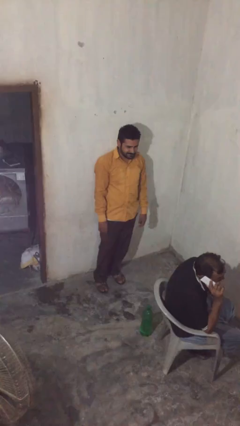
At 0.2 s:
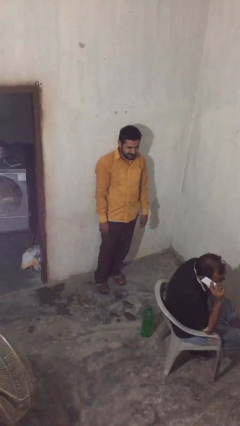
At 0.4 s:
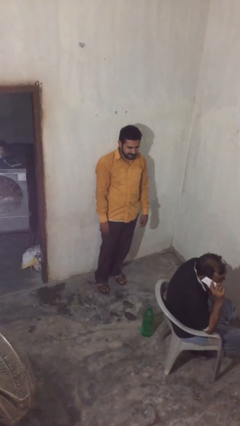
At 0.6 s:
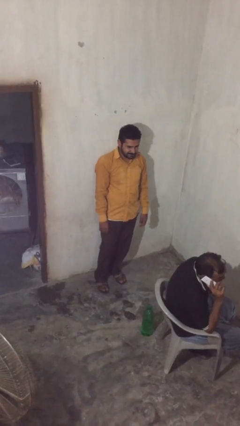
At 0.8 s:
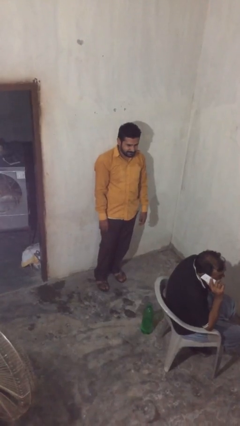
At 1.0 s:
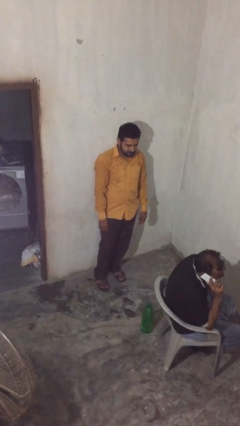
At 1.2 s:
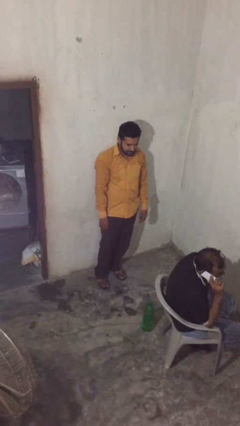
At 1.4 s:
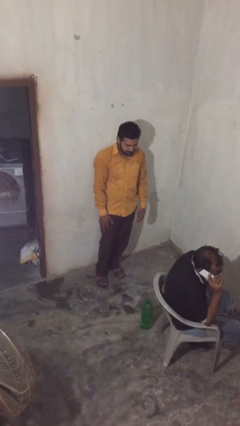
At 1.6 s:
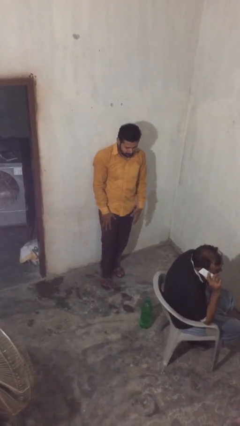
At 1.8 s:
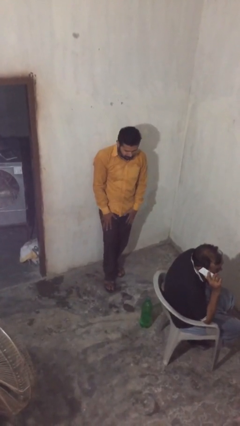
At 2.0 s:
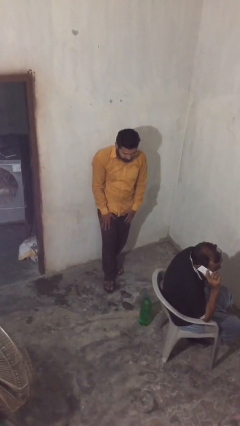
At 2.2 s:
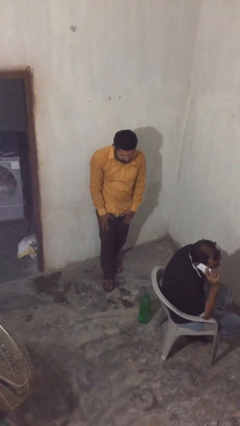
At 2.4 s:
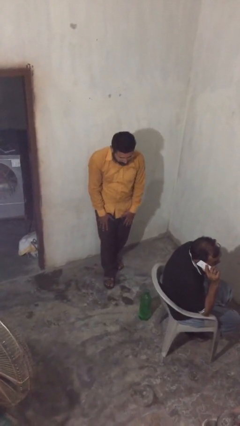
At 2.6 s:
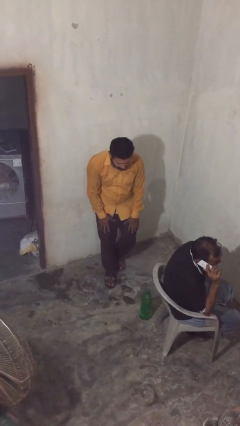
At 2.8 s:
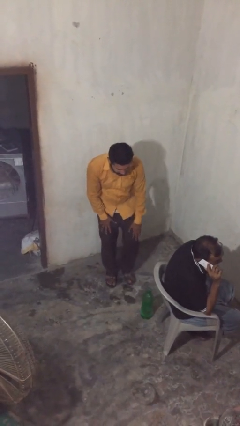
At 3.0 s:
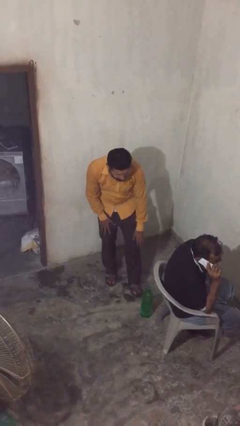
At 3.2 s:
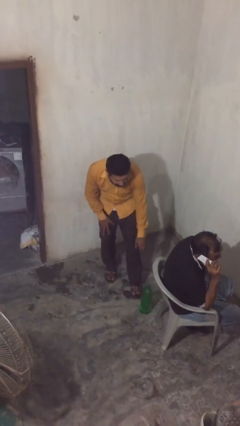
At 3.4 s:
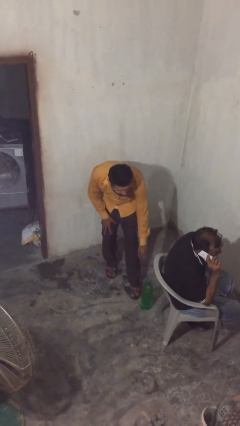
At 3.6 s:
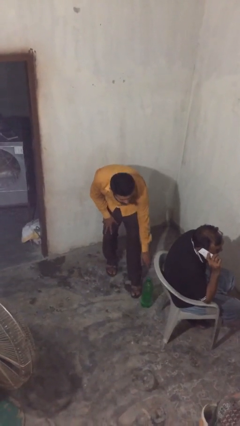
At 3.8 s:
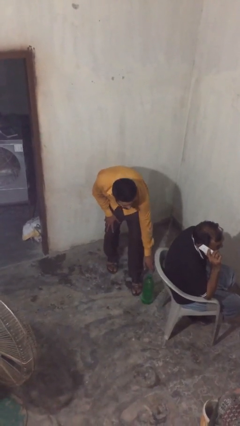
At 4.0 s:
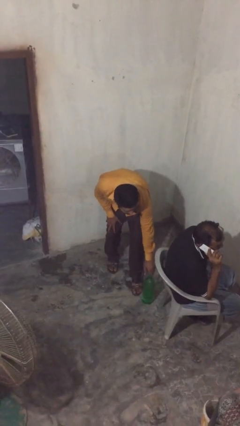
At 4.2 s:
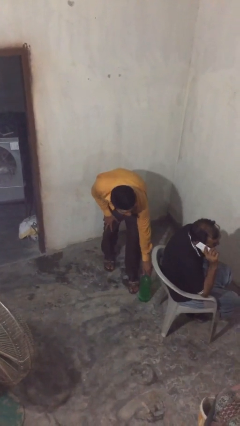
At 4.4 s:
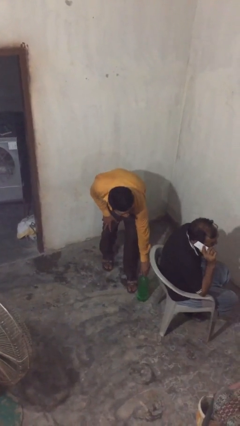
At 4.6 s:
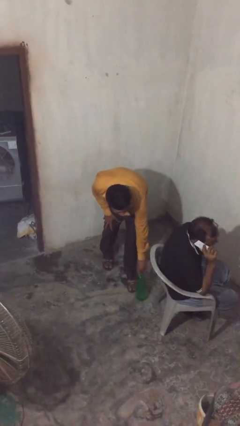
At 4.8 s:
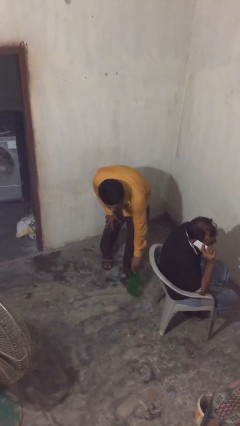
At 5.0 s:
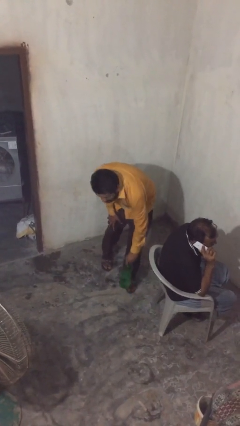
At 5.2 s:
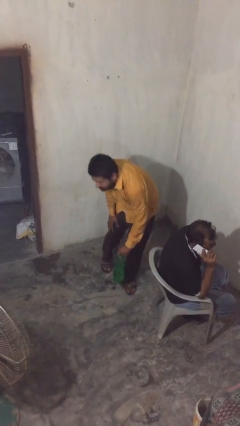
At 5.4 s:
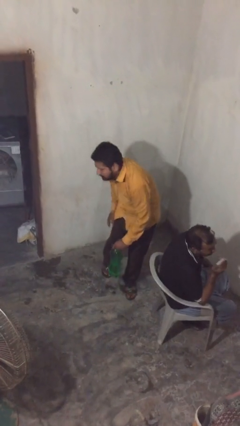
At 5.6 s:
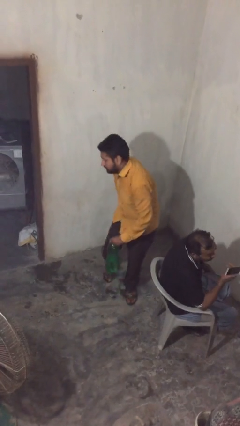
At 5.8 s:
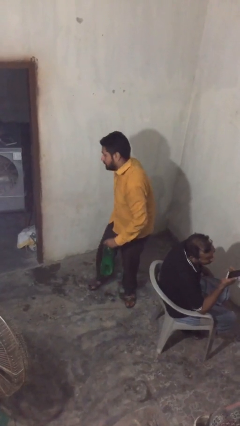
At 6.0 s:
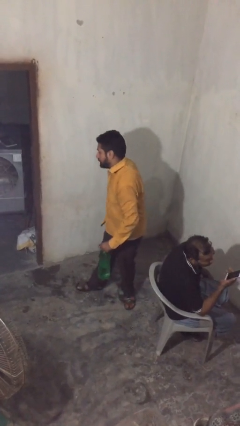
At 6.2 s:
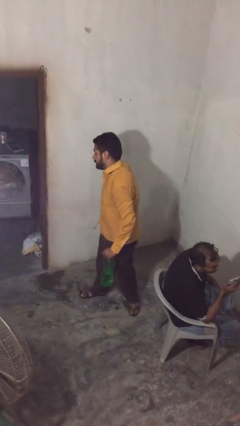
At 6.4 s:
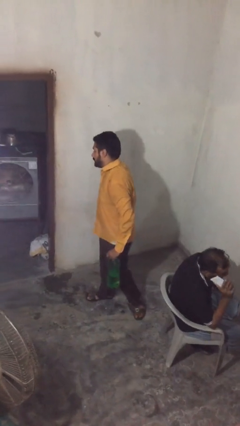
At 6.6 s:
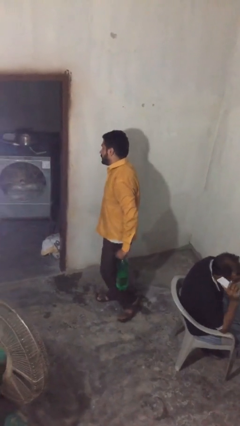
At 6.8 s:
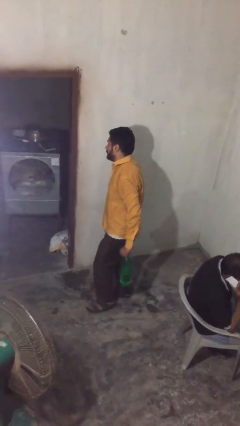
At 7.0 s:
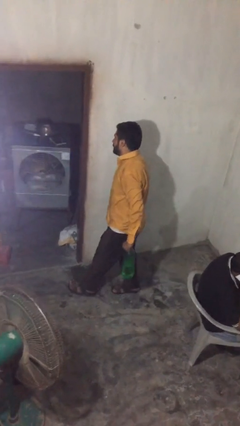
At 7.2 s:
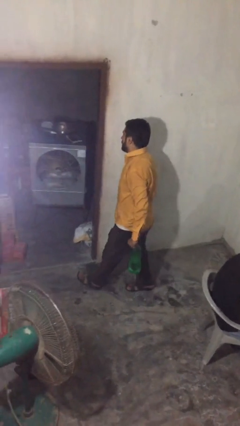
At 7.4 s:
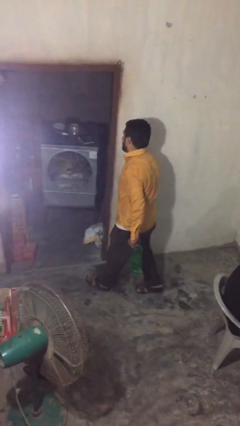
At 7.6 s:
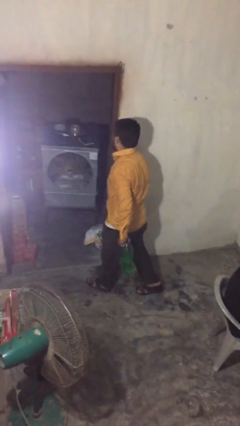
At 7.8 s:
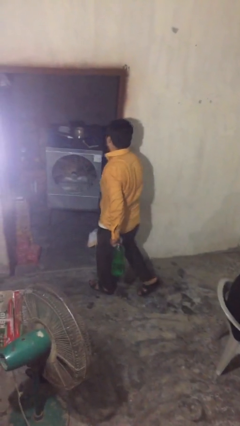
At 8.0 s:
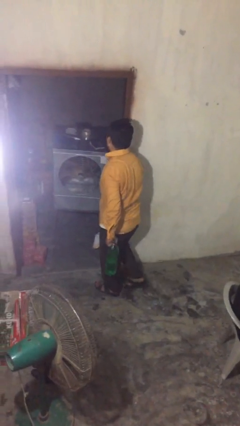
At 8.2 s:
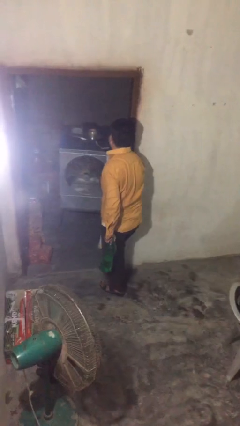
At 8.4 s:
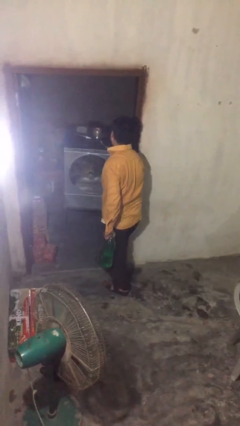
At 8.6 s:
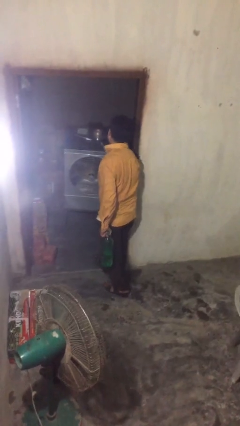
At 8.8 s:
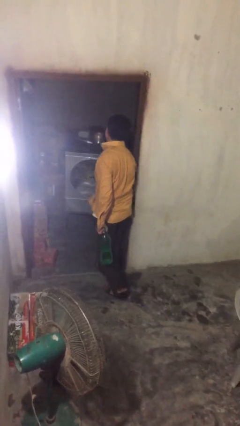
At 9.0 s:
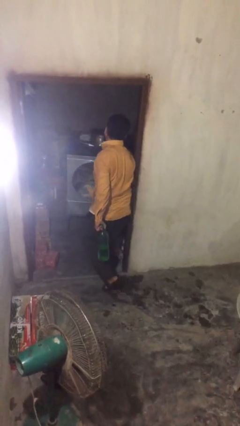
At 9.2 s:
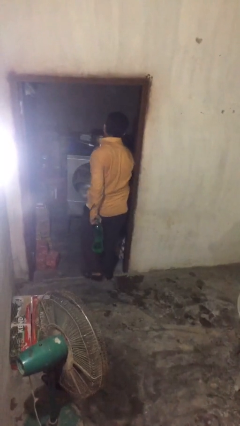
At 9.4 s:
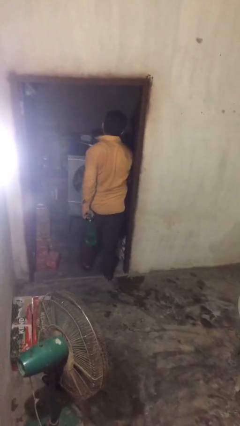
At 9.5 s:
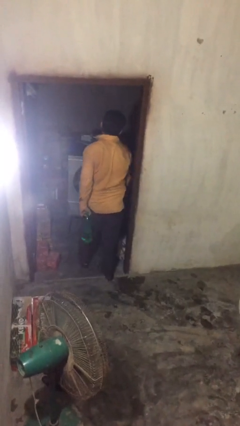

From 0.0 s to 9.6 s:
person steals object from person

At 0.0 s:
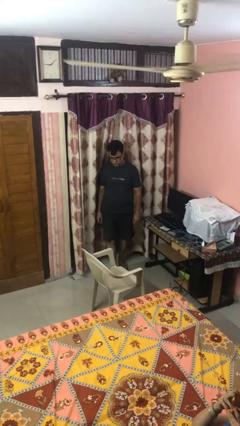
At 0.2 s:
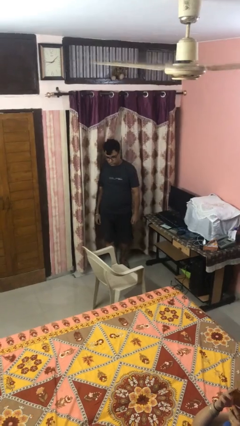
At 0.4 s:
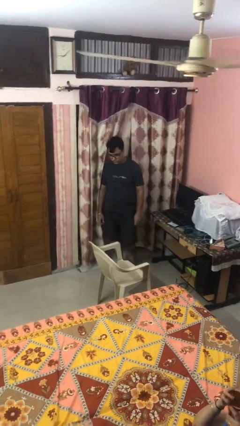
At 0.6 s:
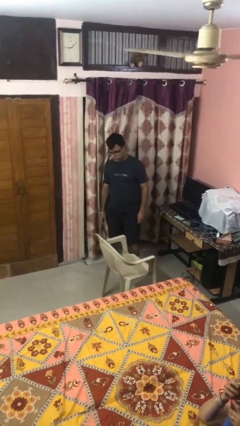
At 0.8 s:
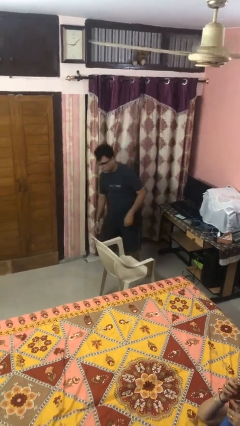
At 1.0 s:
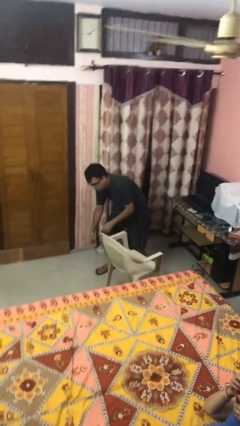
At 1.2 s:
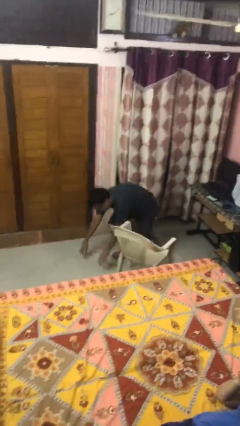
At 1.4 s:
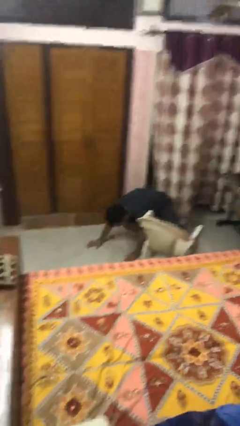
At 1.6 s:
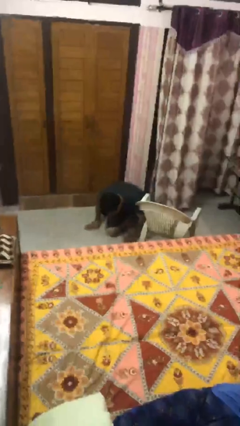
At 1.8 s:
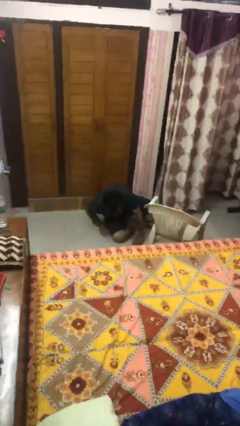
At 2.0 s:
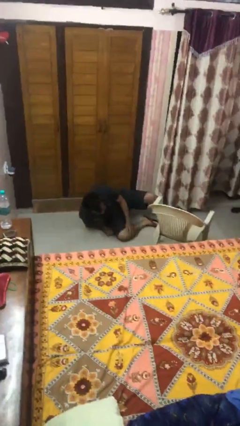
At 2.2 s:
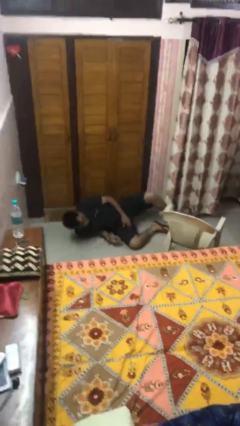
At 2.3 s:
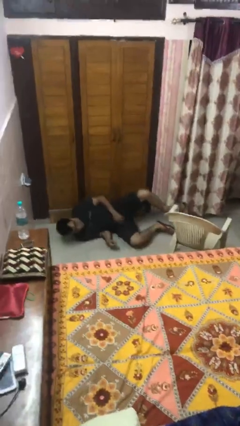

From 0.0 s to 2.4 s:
person trips on object on floor

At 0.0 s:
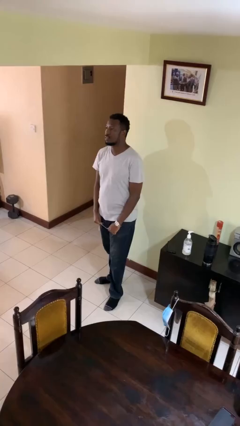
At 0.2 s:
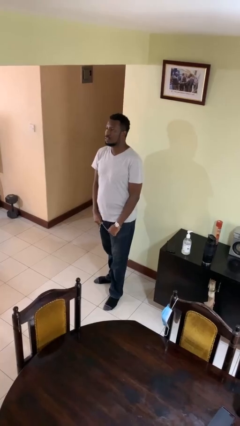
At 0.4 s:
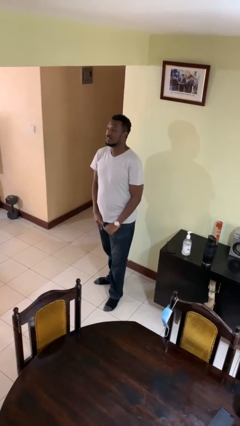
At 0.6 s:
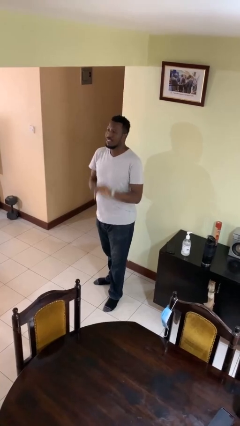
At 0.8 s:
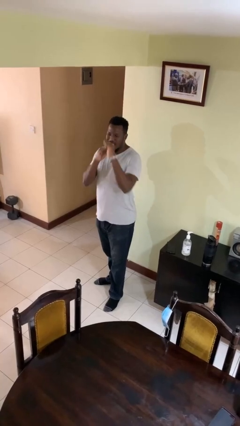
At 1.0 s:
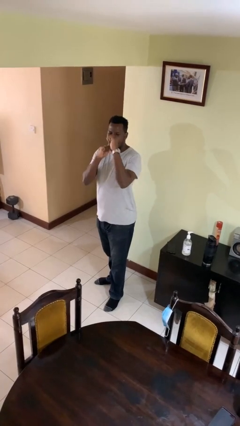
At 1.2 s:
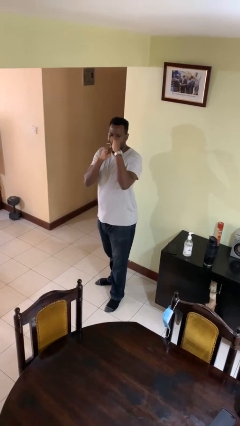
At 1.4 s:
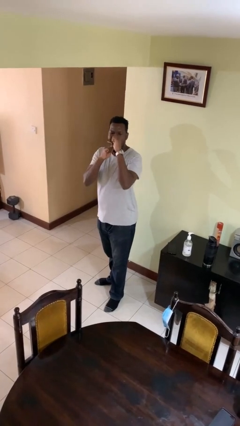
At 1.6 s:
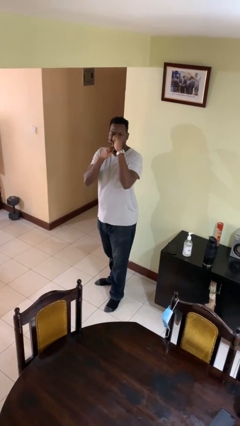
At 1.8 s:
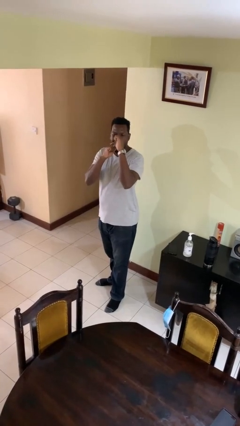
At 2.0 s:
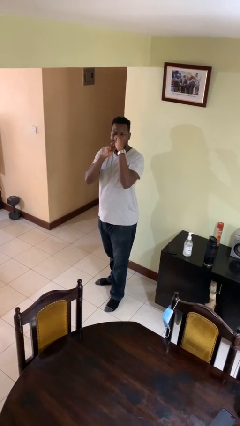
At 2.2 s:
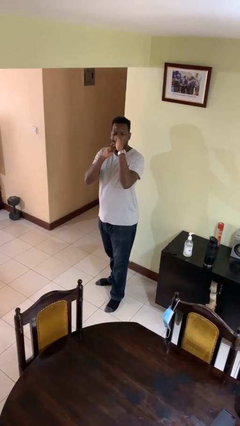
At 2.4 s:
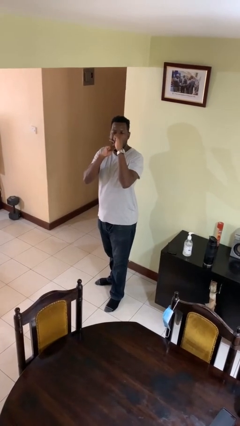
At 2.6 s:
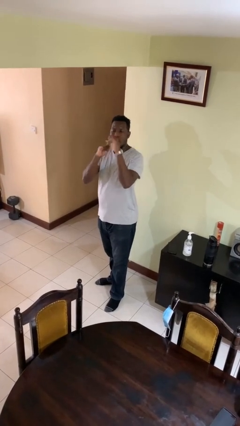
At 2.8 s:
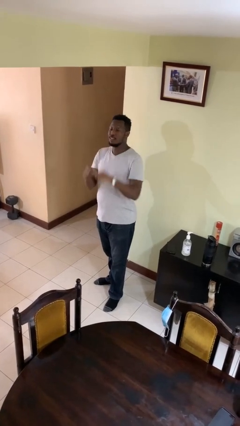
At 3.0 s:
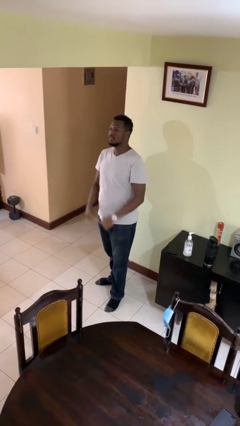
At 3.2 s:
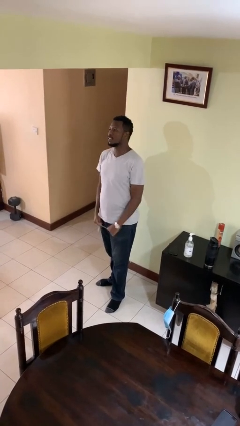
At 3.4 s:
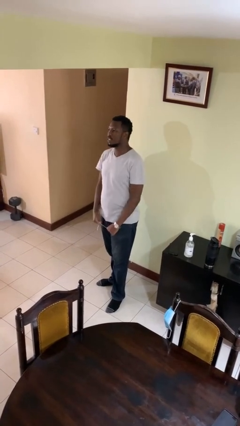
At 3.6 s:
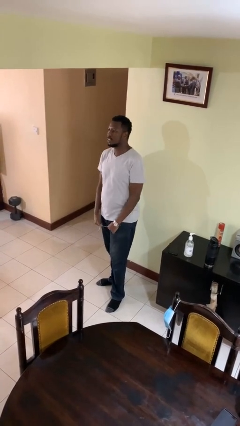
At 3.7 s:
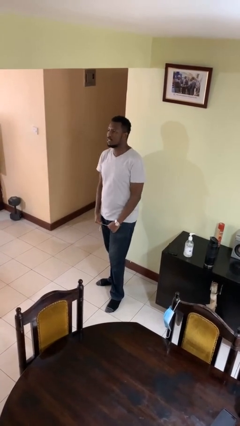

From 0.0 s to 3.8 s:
person flosses

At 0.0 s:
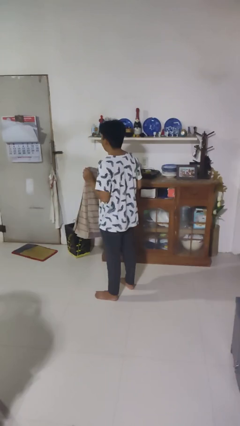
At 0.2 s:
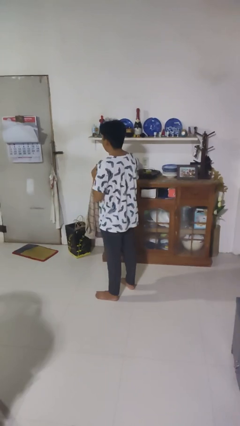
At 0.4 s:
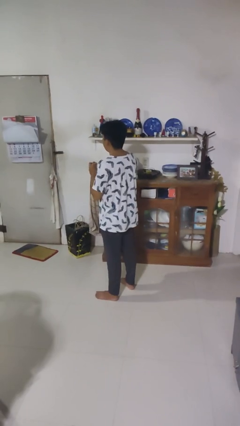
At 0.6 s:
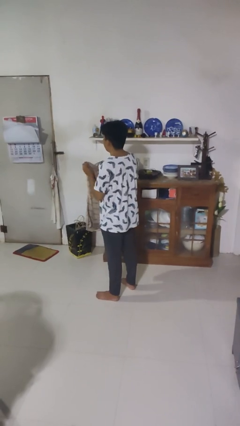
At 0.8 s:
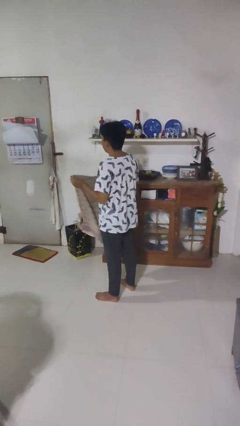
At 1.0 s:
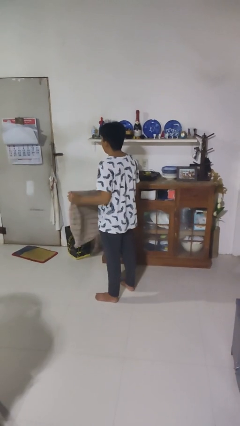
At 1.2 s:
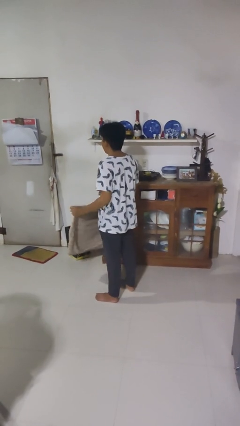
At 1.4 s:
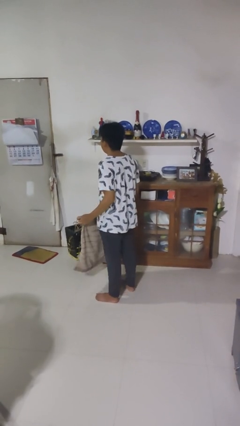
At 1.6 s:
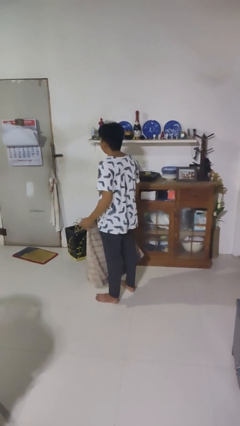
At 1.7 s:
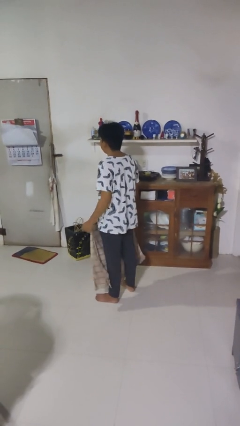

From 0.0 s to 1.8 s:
person unfolds blanket
